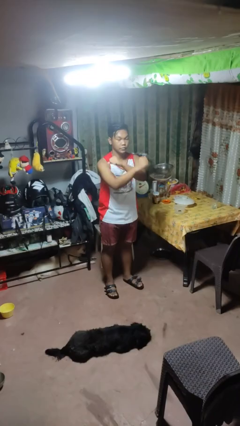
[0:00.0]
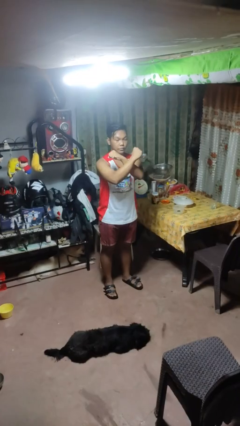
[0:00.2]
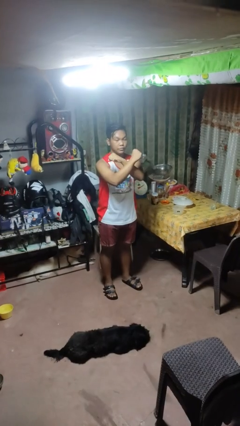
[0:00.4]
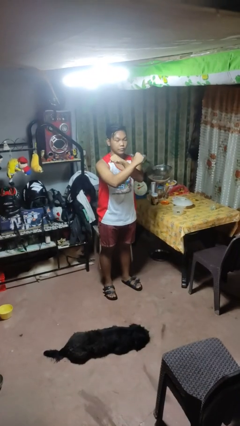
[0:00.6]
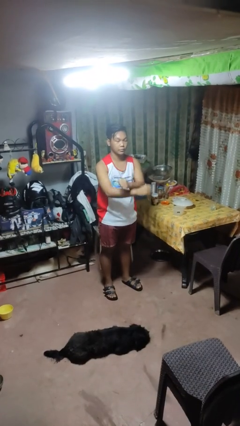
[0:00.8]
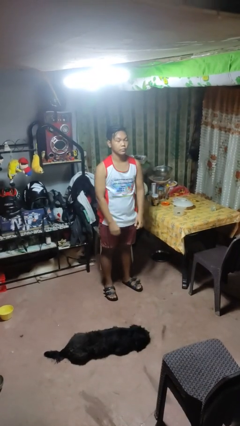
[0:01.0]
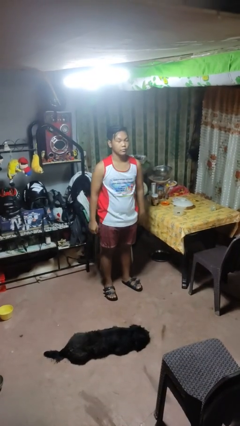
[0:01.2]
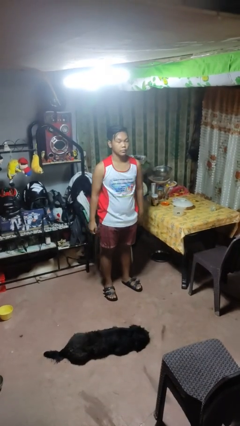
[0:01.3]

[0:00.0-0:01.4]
person gestures arms x

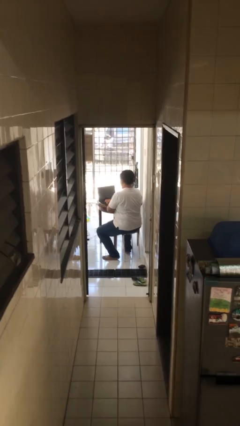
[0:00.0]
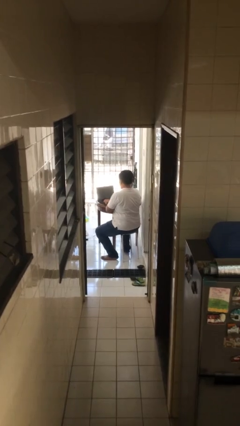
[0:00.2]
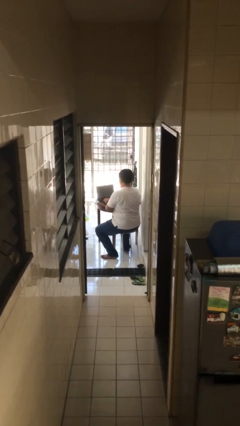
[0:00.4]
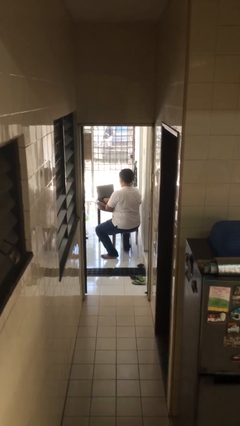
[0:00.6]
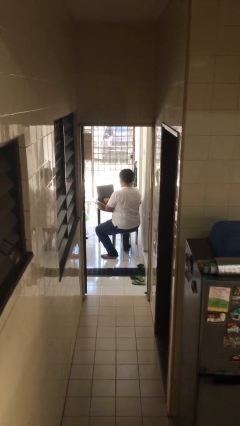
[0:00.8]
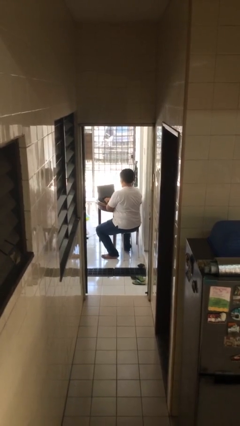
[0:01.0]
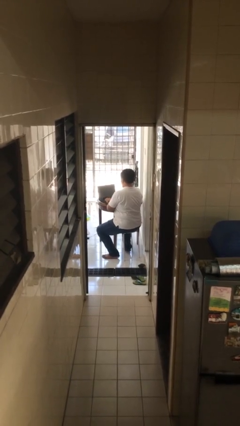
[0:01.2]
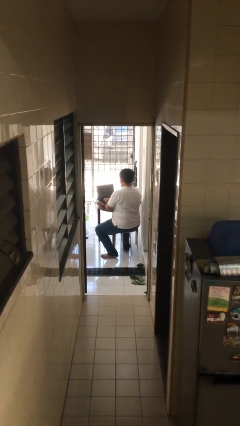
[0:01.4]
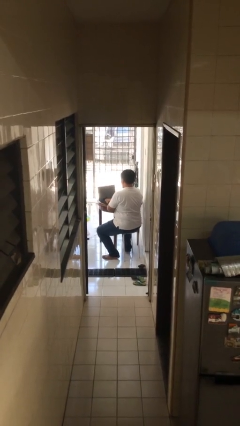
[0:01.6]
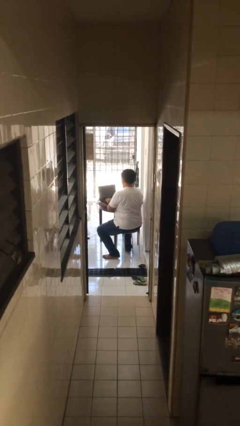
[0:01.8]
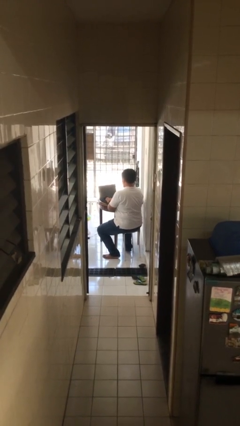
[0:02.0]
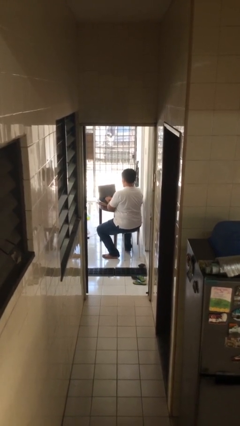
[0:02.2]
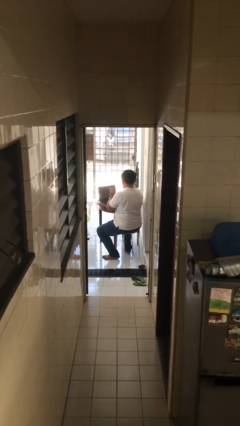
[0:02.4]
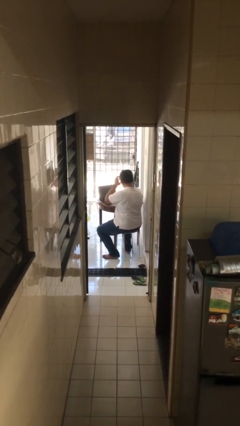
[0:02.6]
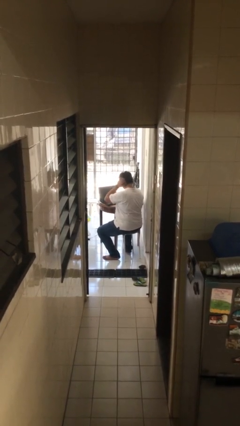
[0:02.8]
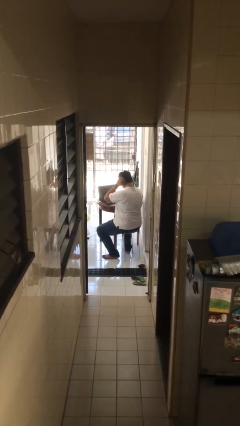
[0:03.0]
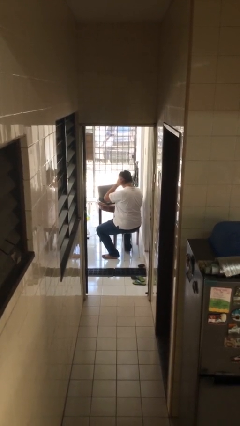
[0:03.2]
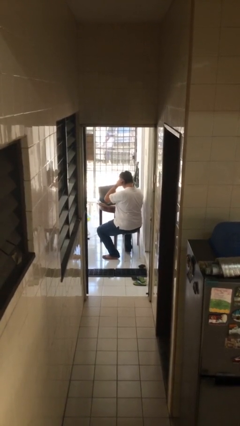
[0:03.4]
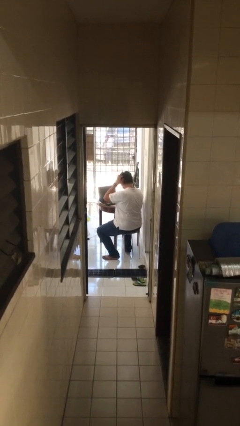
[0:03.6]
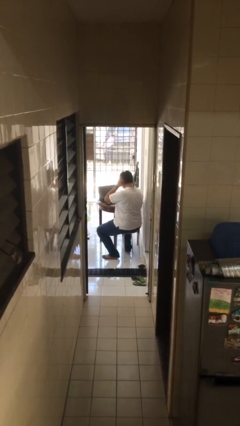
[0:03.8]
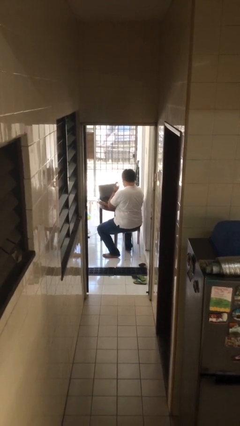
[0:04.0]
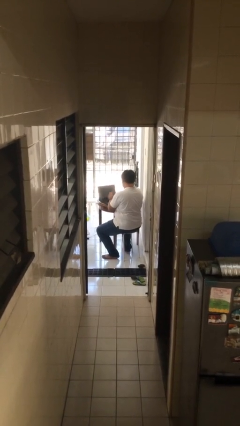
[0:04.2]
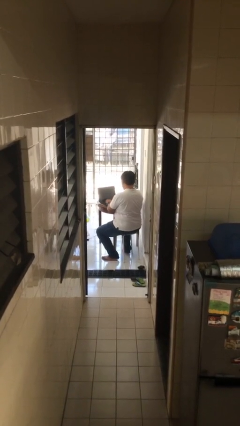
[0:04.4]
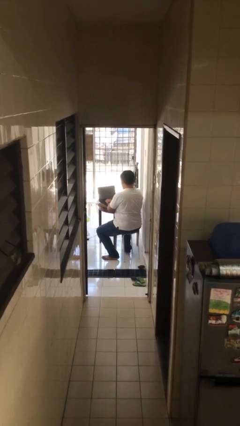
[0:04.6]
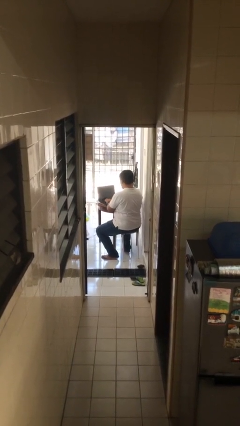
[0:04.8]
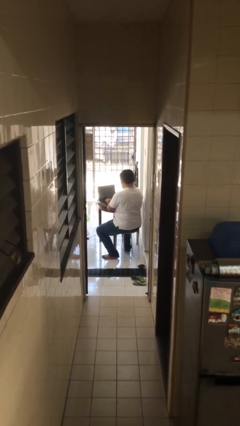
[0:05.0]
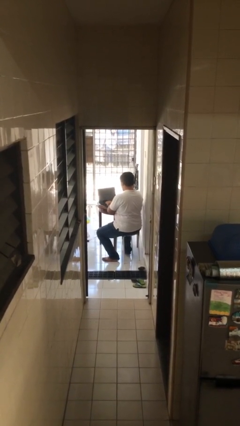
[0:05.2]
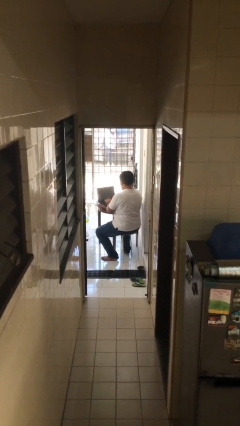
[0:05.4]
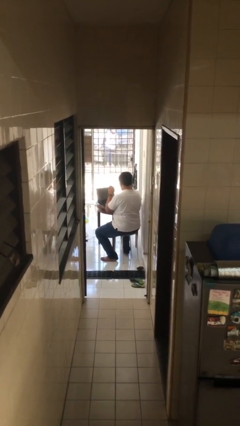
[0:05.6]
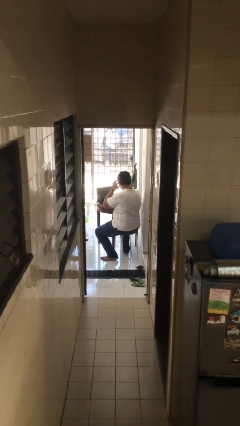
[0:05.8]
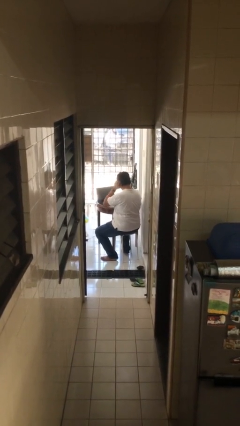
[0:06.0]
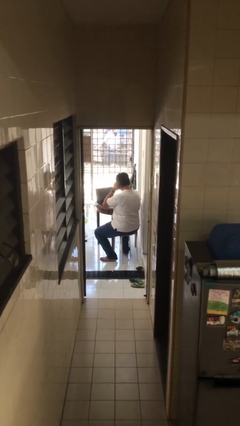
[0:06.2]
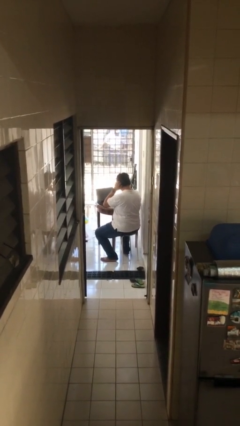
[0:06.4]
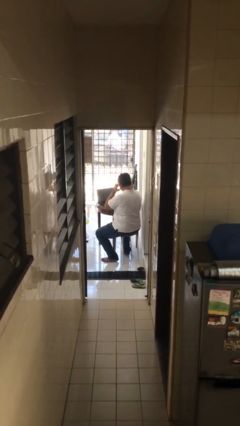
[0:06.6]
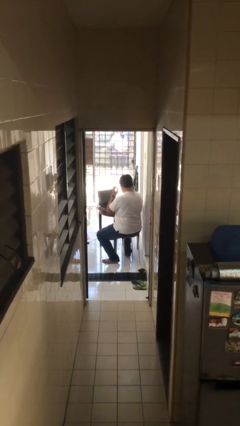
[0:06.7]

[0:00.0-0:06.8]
person interacts with laptop

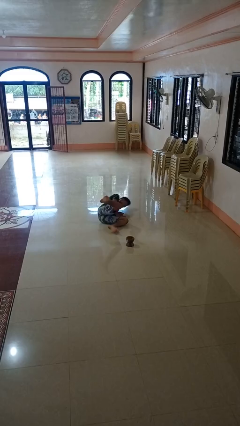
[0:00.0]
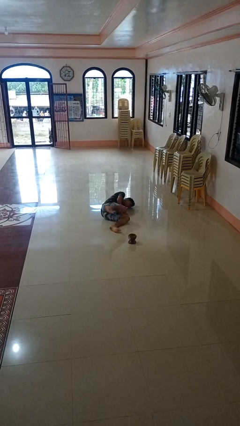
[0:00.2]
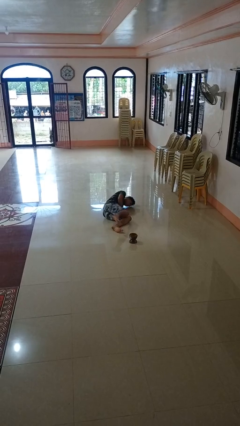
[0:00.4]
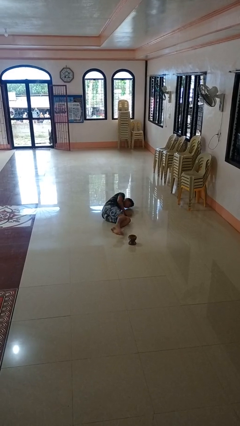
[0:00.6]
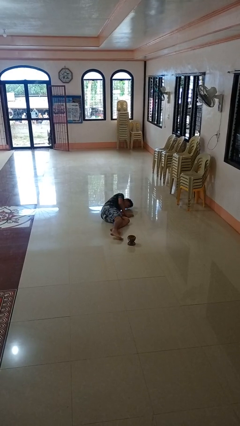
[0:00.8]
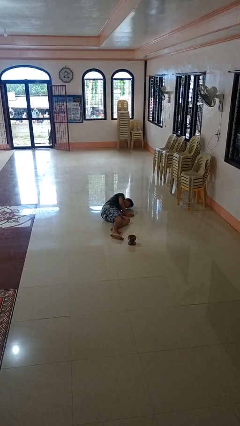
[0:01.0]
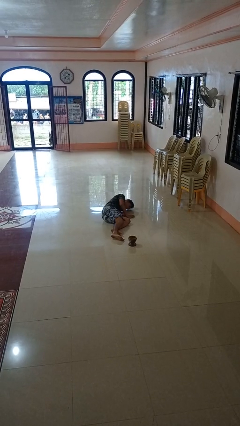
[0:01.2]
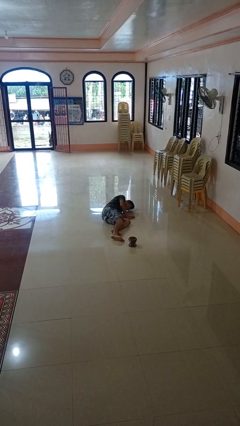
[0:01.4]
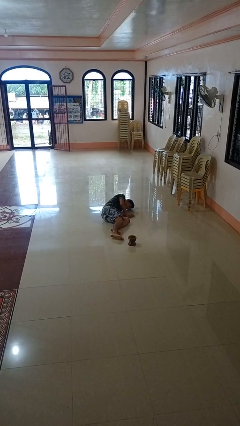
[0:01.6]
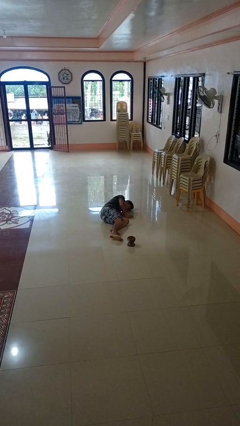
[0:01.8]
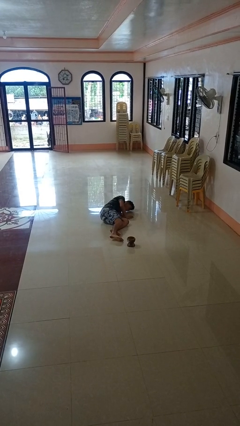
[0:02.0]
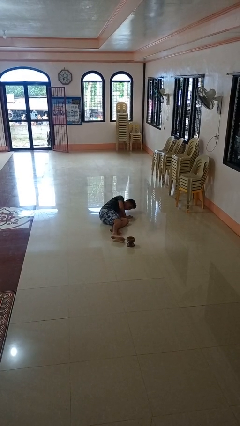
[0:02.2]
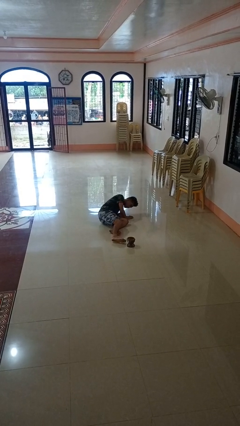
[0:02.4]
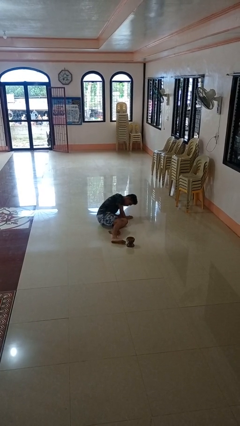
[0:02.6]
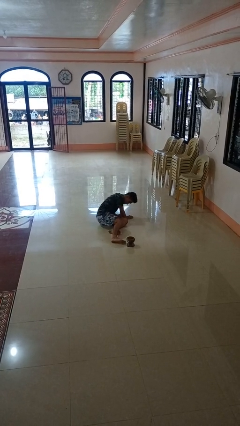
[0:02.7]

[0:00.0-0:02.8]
person lies down on floor

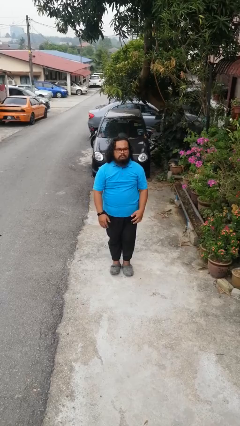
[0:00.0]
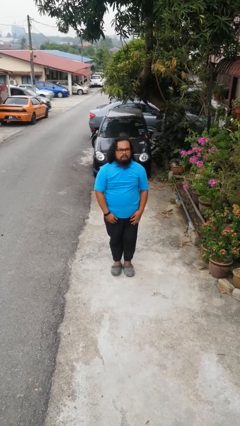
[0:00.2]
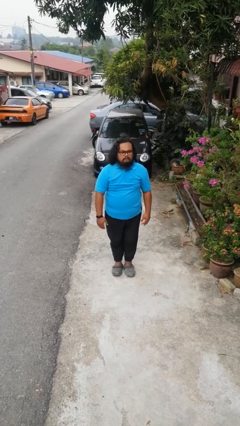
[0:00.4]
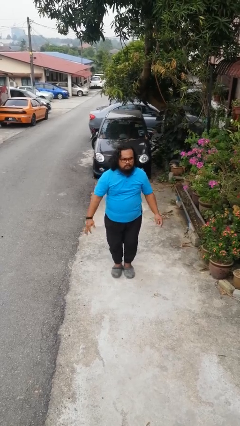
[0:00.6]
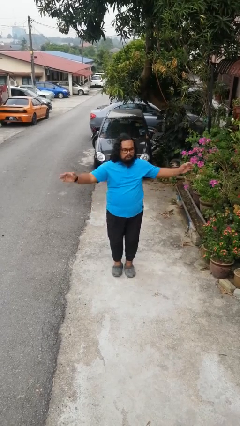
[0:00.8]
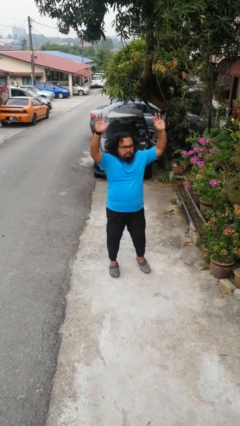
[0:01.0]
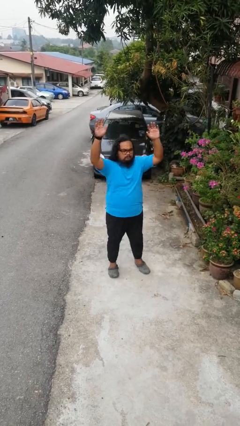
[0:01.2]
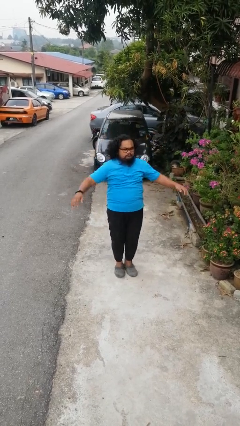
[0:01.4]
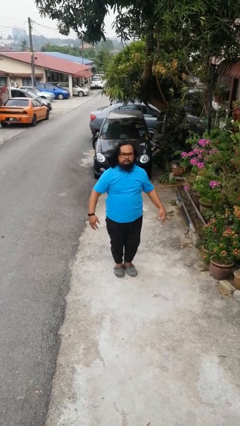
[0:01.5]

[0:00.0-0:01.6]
person exercises with jumping jacks

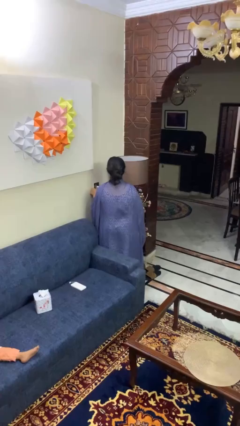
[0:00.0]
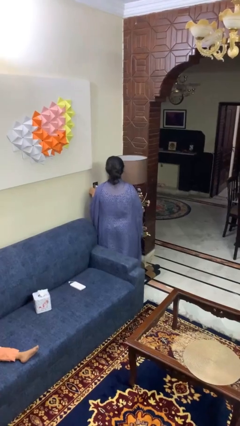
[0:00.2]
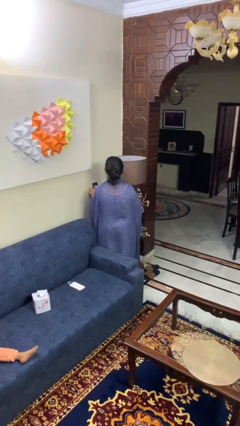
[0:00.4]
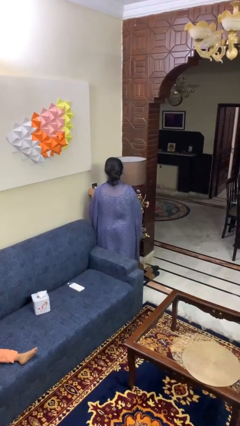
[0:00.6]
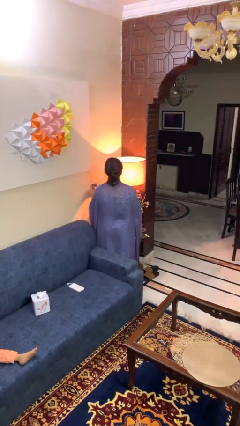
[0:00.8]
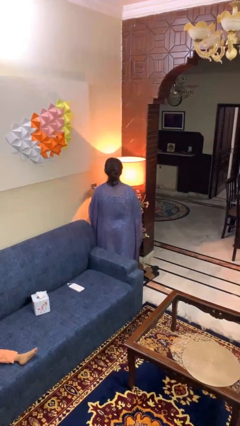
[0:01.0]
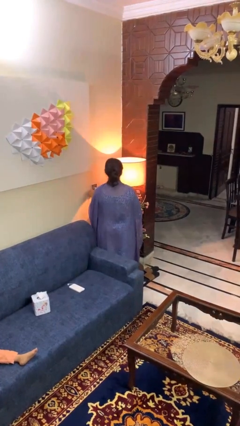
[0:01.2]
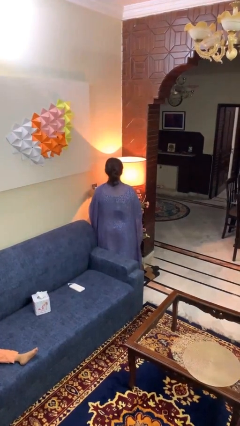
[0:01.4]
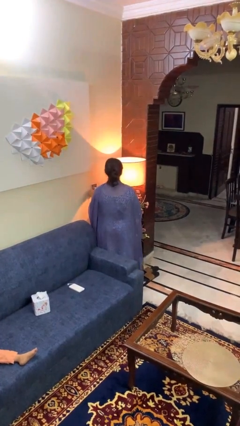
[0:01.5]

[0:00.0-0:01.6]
person turns on lamp

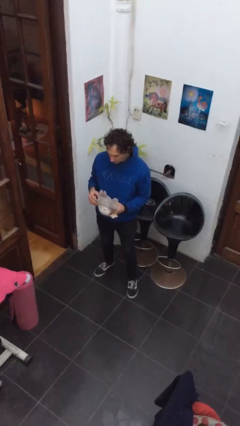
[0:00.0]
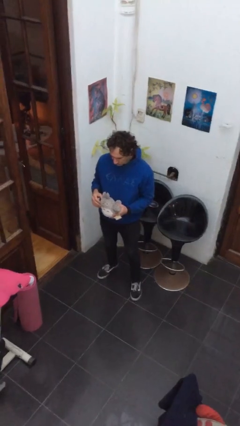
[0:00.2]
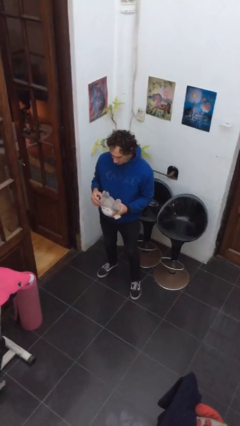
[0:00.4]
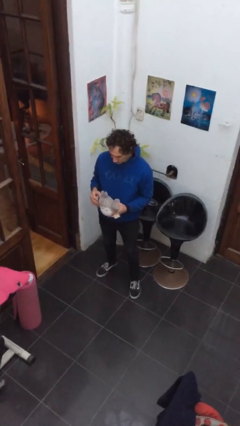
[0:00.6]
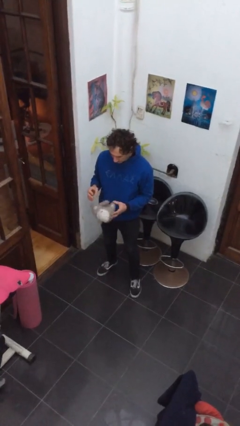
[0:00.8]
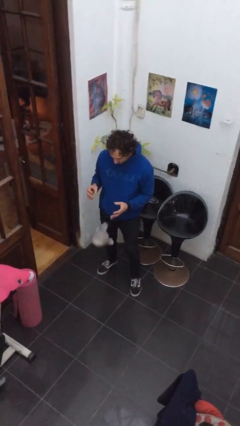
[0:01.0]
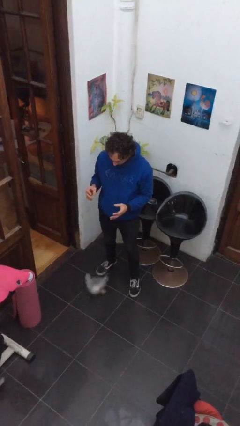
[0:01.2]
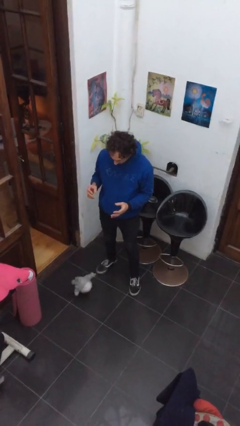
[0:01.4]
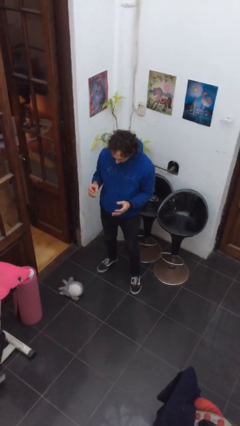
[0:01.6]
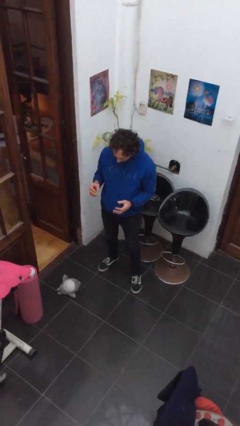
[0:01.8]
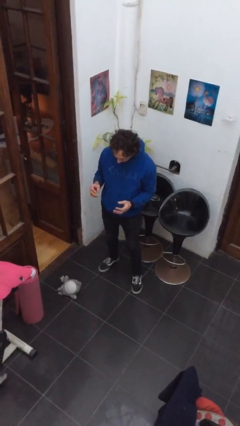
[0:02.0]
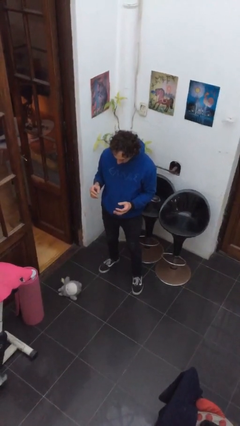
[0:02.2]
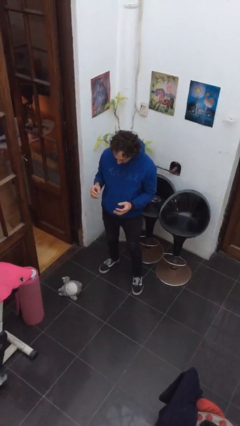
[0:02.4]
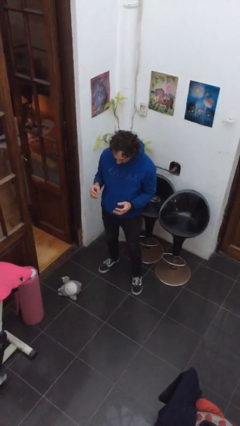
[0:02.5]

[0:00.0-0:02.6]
person drops object

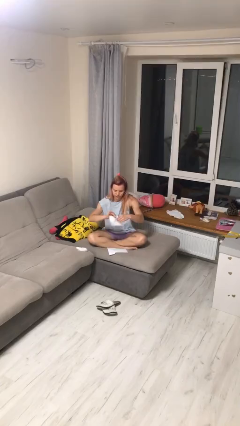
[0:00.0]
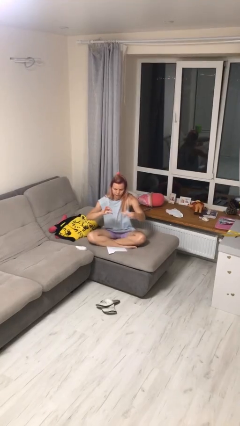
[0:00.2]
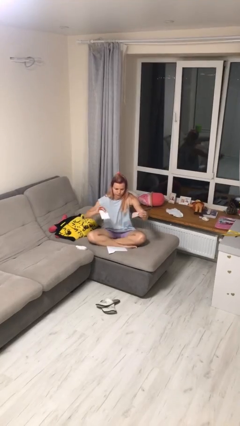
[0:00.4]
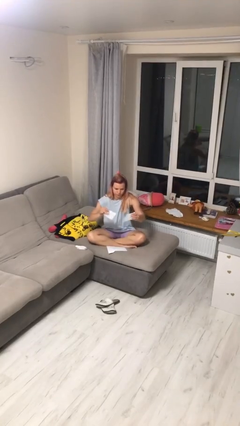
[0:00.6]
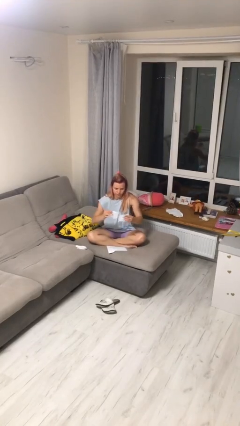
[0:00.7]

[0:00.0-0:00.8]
person tears paper
